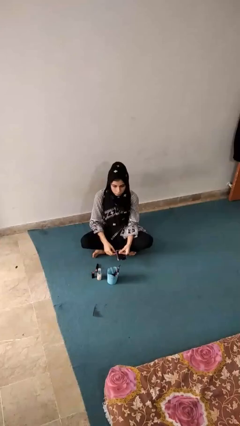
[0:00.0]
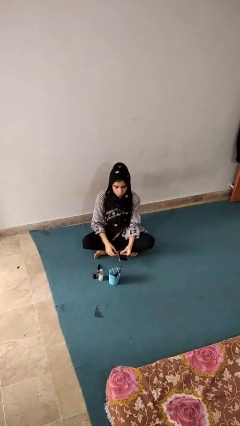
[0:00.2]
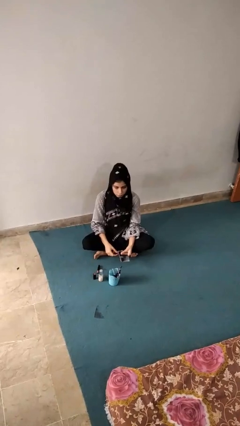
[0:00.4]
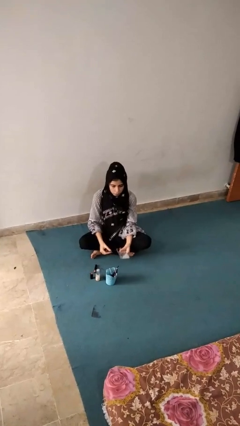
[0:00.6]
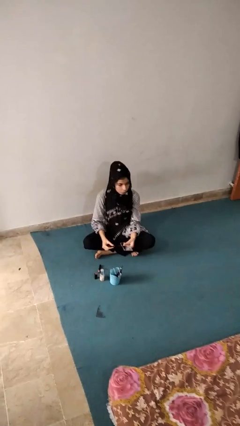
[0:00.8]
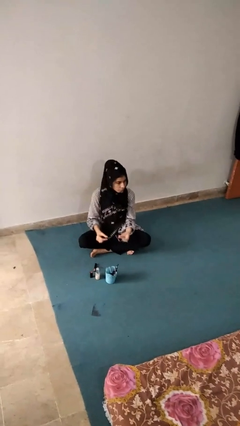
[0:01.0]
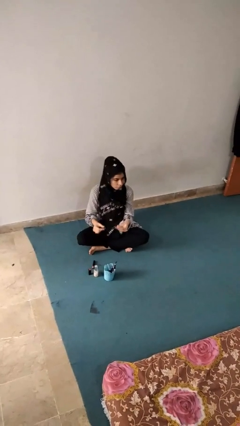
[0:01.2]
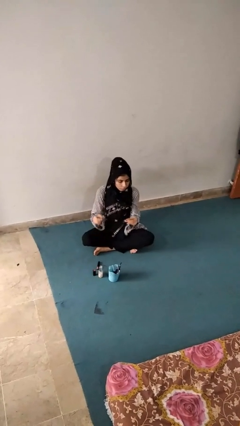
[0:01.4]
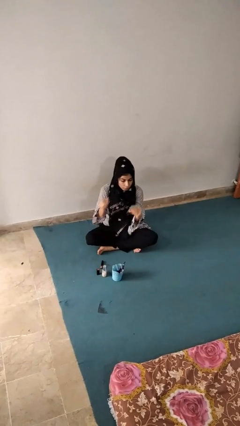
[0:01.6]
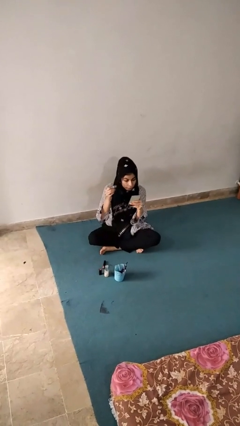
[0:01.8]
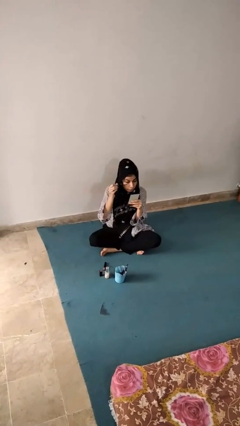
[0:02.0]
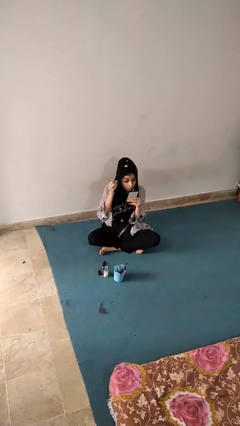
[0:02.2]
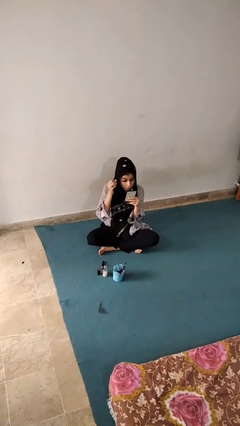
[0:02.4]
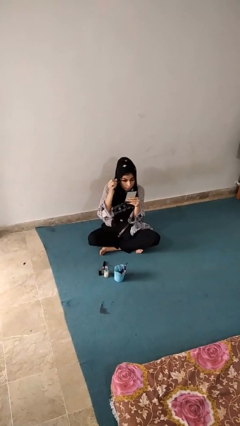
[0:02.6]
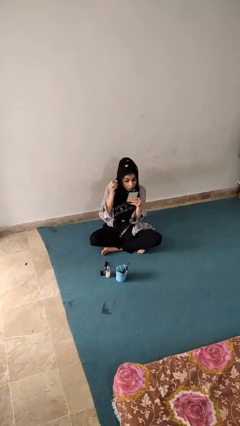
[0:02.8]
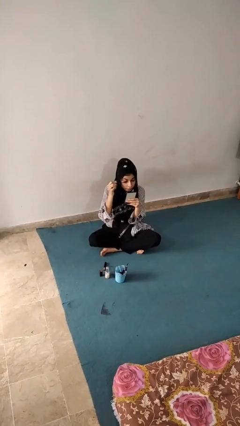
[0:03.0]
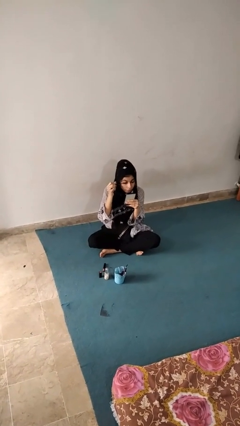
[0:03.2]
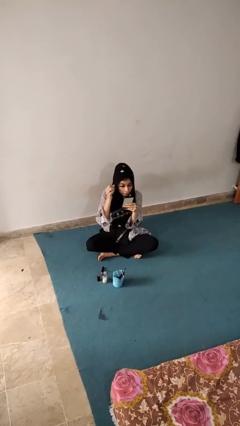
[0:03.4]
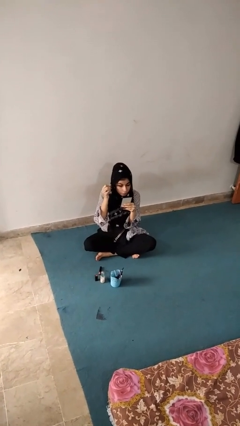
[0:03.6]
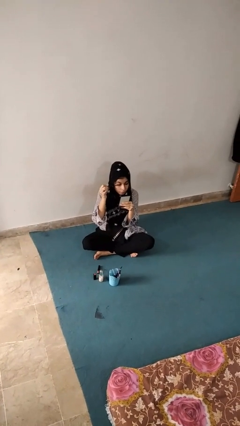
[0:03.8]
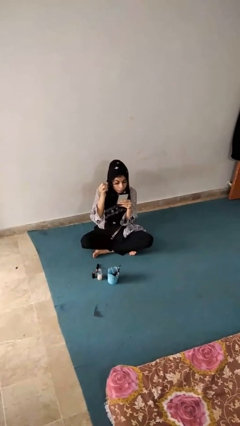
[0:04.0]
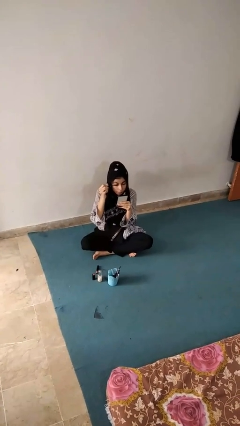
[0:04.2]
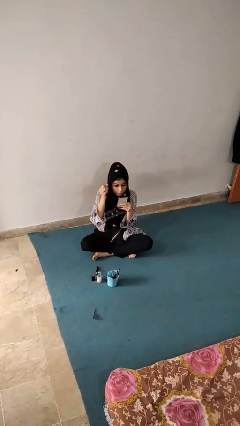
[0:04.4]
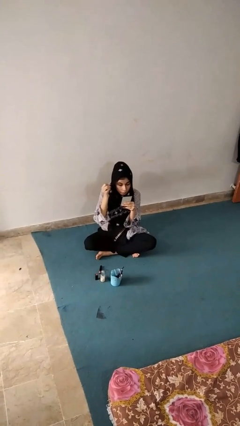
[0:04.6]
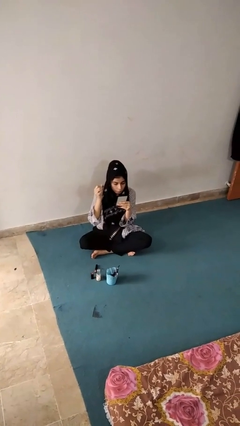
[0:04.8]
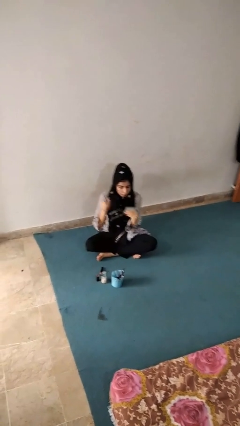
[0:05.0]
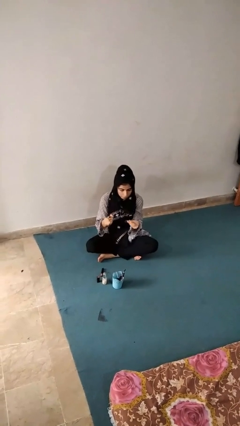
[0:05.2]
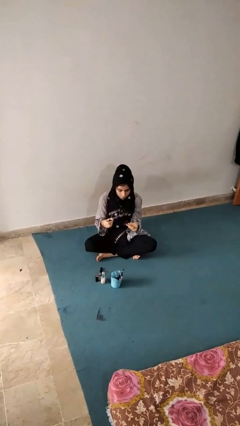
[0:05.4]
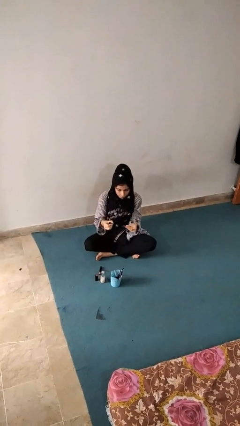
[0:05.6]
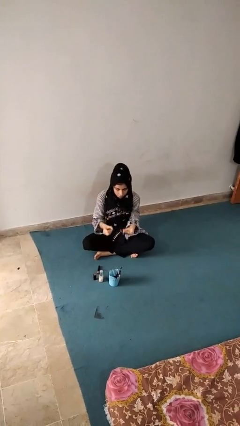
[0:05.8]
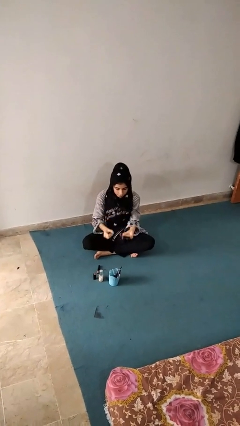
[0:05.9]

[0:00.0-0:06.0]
person applies eye makeup

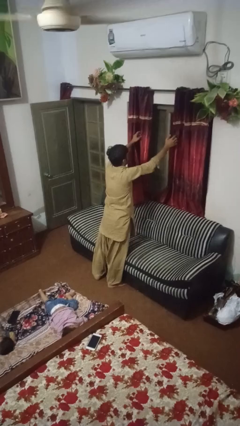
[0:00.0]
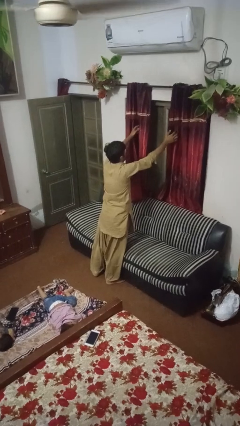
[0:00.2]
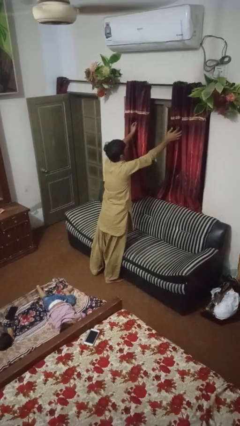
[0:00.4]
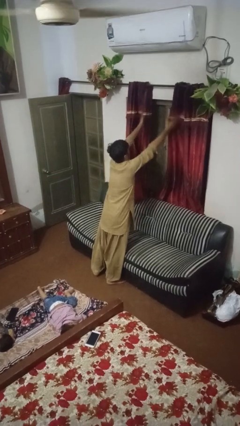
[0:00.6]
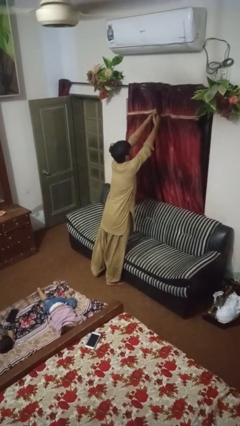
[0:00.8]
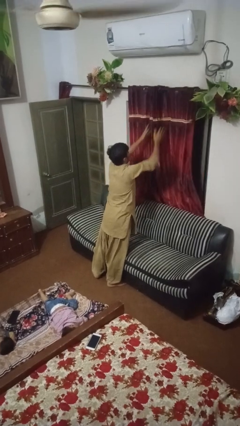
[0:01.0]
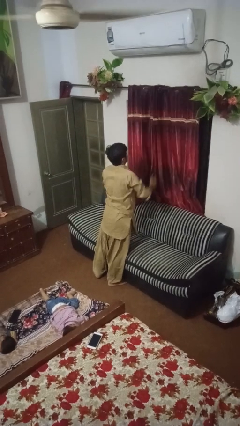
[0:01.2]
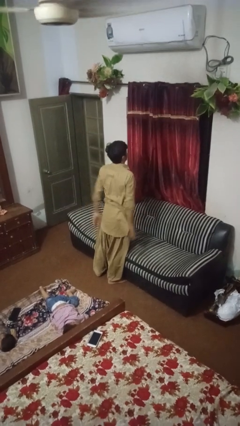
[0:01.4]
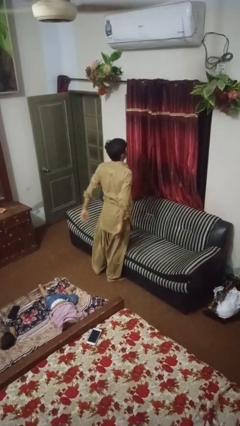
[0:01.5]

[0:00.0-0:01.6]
person closes curtains

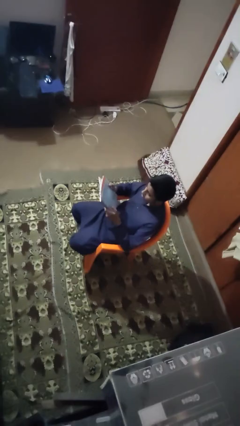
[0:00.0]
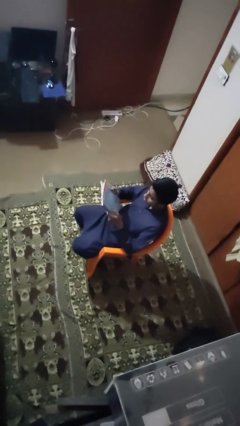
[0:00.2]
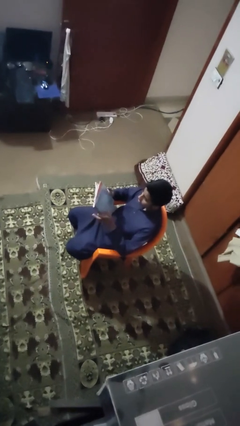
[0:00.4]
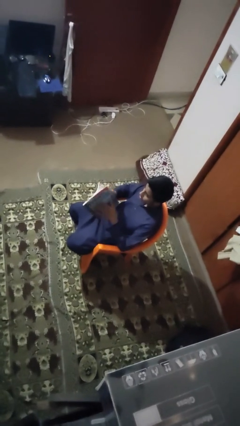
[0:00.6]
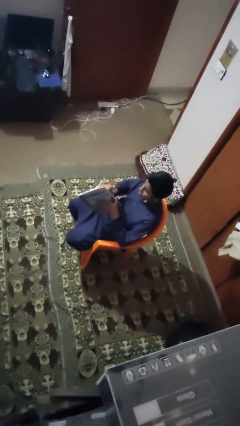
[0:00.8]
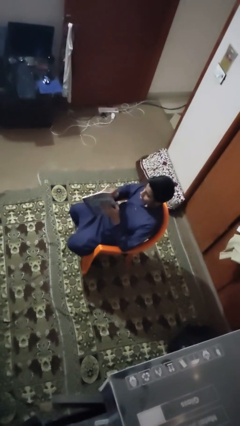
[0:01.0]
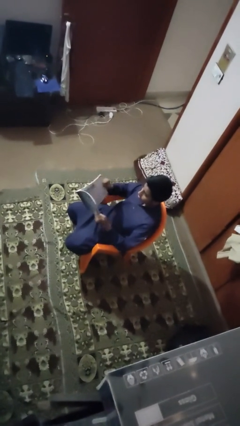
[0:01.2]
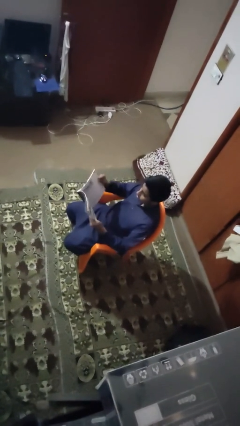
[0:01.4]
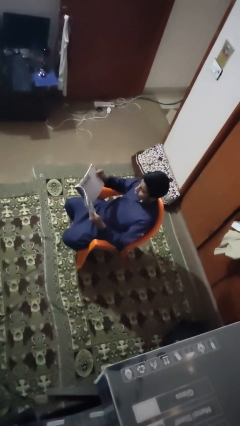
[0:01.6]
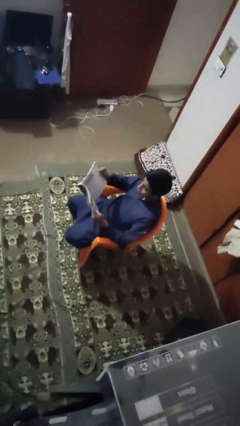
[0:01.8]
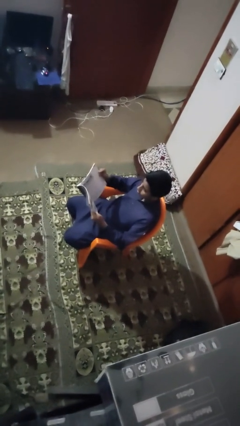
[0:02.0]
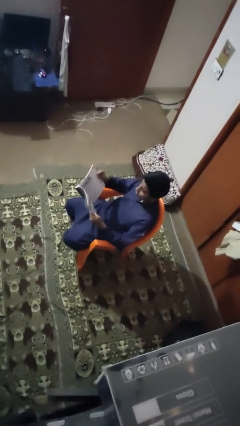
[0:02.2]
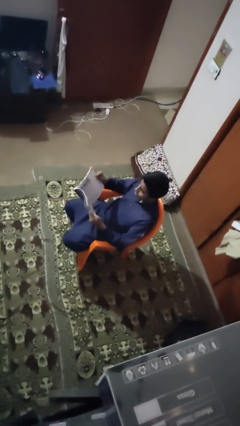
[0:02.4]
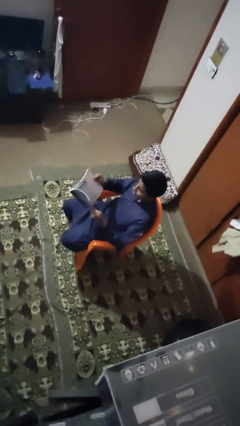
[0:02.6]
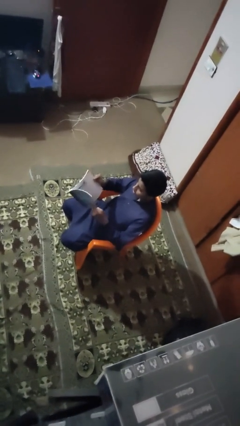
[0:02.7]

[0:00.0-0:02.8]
person reads book

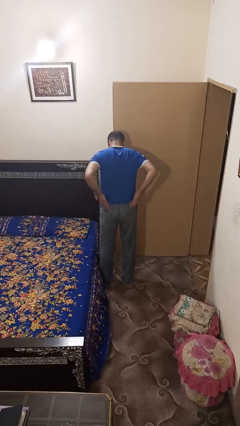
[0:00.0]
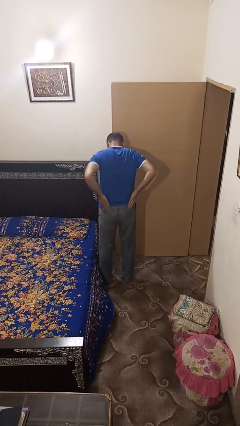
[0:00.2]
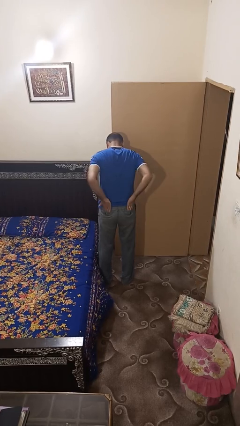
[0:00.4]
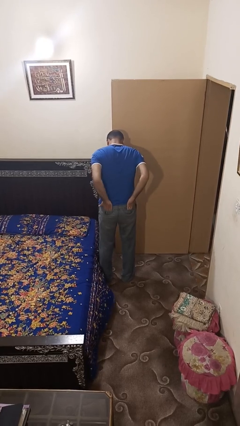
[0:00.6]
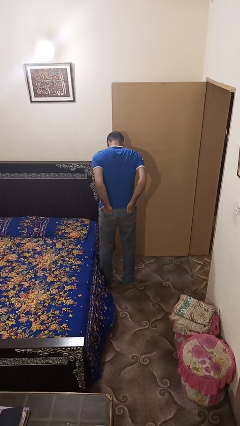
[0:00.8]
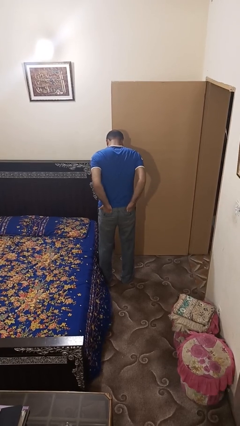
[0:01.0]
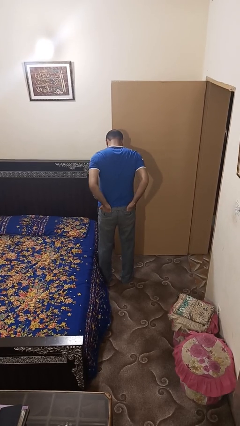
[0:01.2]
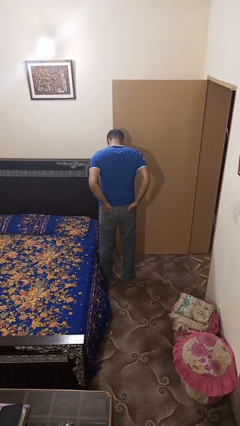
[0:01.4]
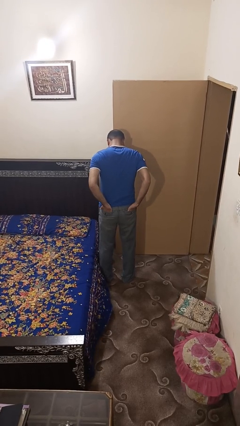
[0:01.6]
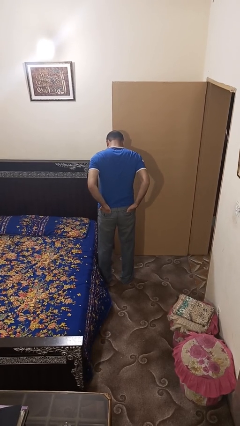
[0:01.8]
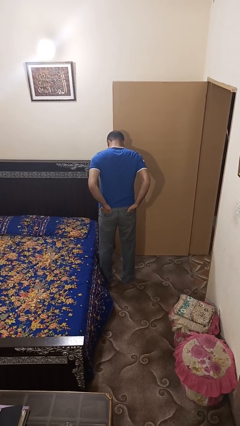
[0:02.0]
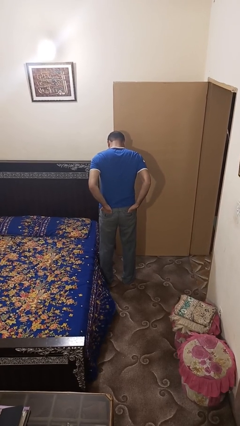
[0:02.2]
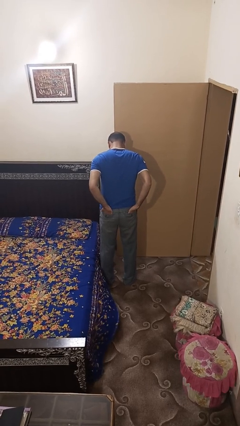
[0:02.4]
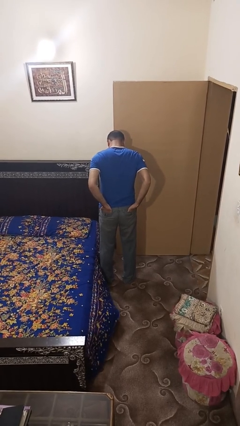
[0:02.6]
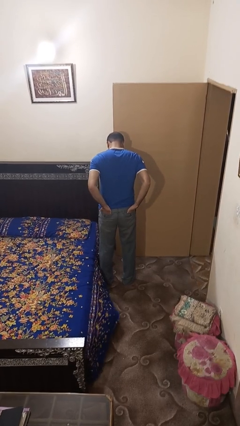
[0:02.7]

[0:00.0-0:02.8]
person puts hands in back pockets

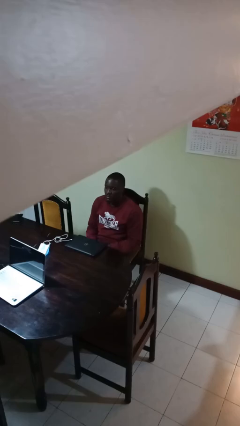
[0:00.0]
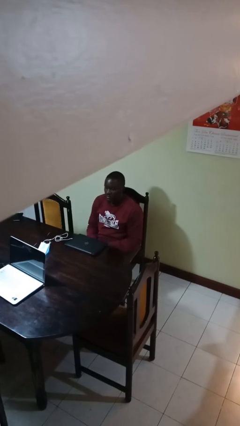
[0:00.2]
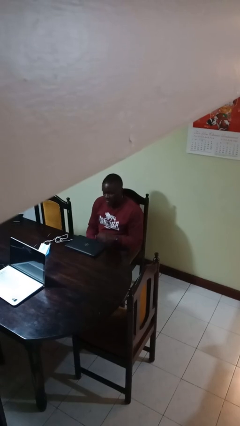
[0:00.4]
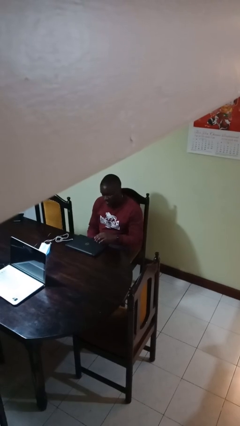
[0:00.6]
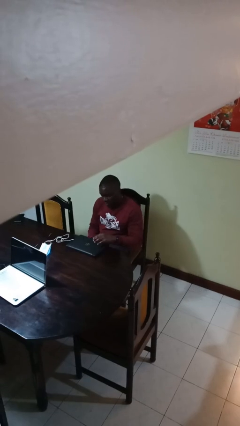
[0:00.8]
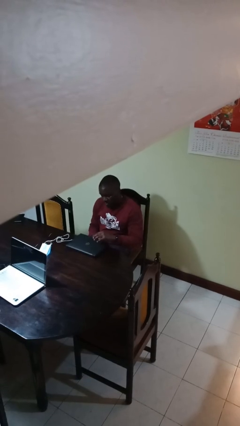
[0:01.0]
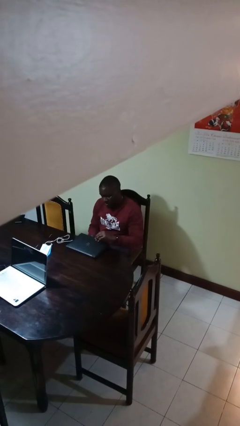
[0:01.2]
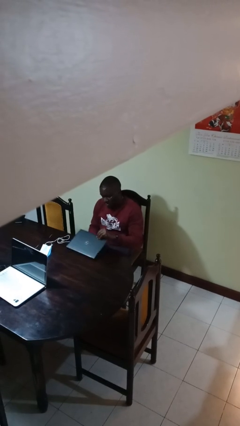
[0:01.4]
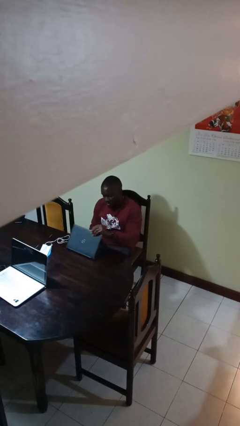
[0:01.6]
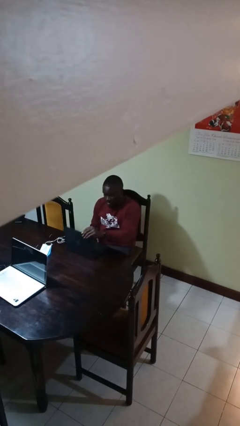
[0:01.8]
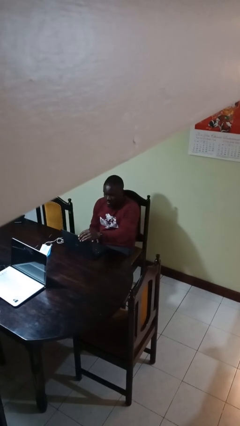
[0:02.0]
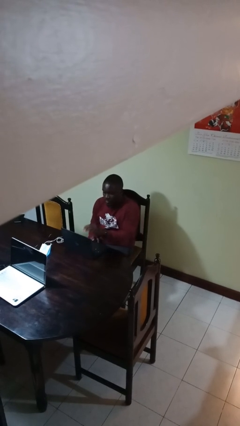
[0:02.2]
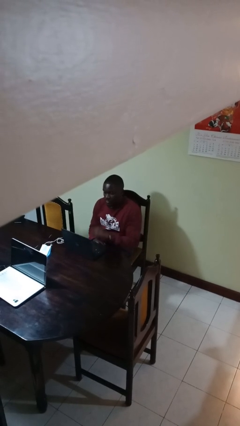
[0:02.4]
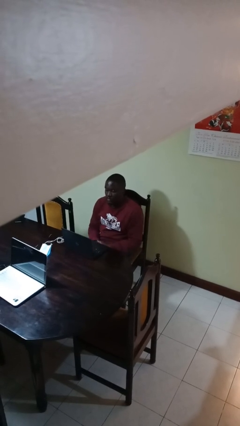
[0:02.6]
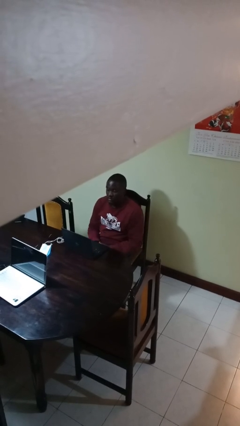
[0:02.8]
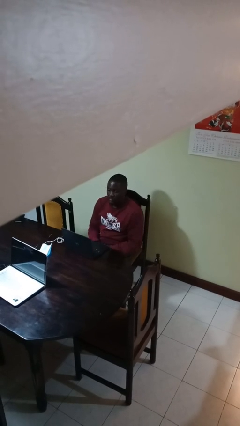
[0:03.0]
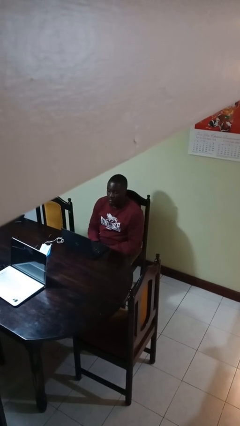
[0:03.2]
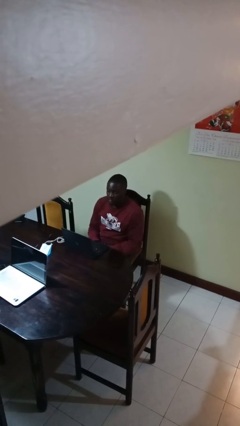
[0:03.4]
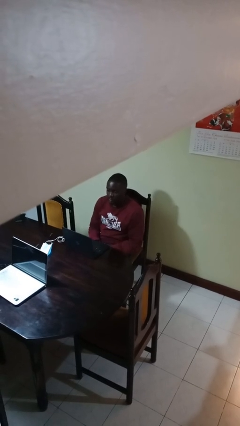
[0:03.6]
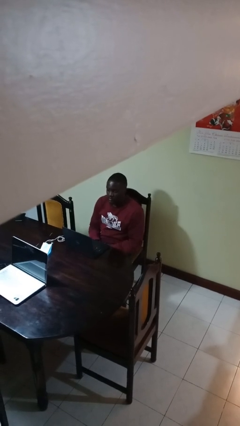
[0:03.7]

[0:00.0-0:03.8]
person opens laptop

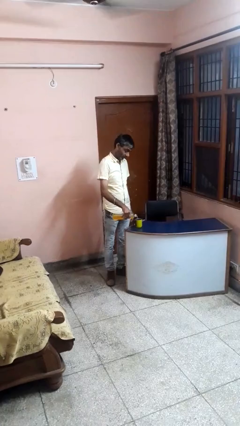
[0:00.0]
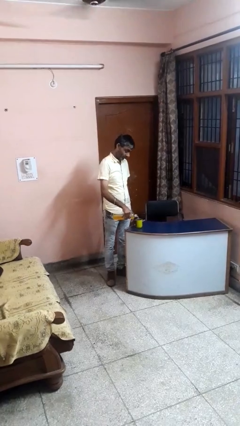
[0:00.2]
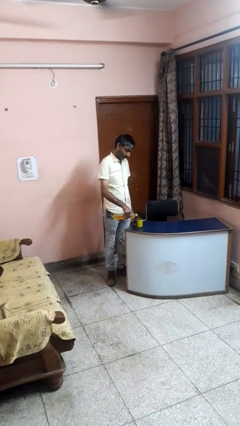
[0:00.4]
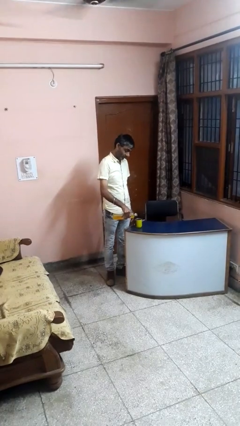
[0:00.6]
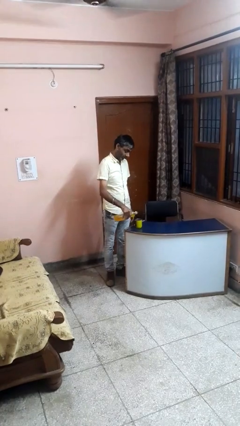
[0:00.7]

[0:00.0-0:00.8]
person pours liquid into cup
